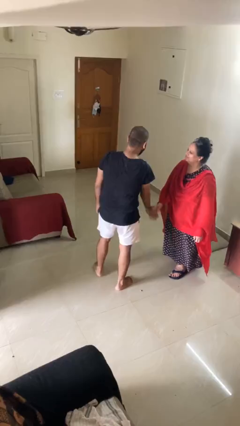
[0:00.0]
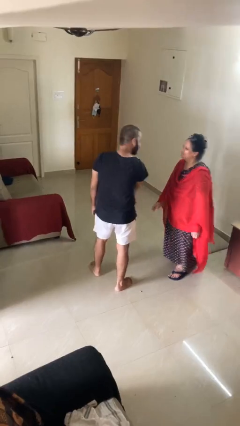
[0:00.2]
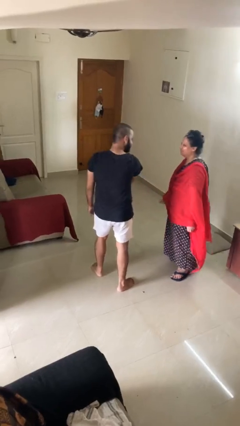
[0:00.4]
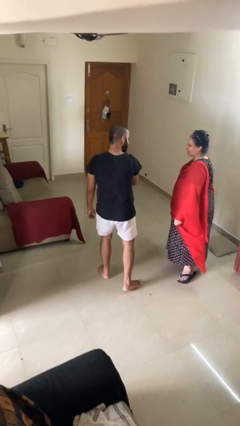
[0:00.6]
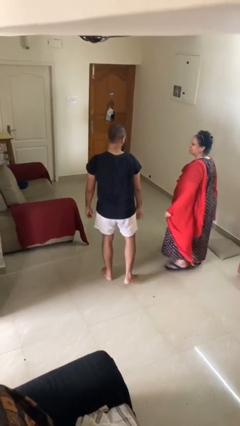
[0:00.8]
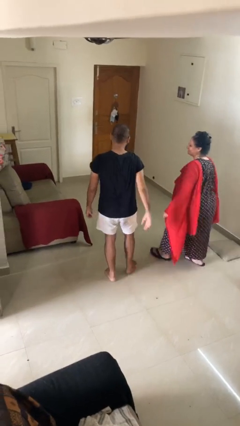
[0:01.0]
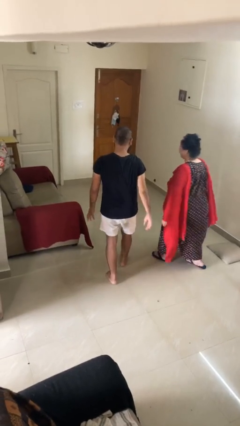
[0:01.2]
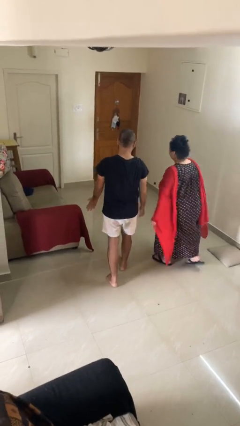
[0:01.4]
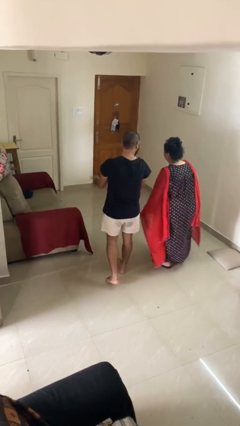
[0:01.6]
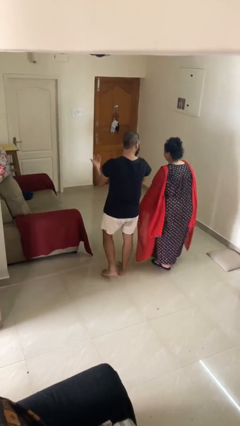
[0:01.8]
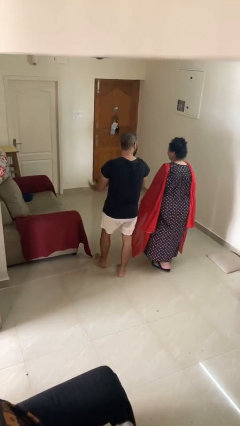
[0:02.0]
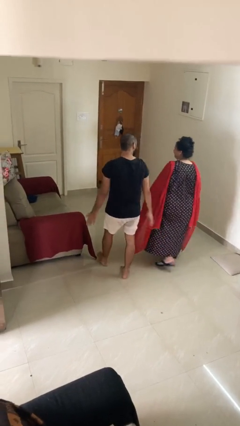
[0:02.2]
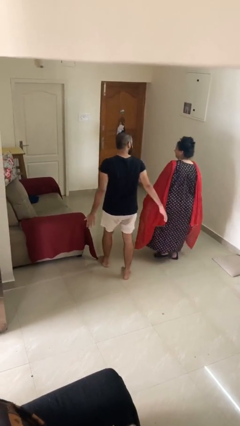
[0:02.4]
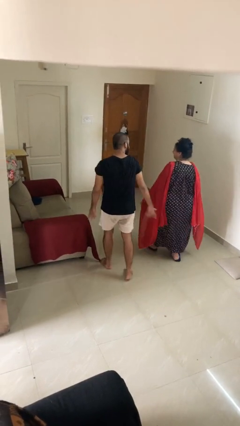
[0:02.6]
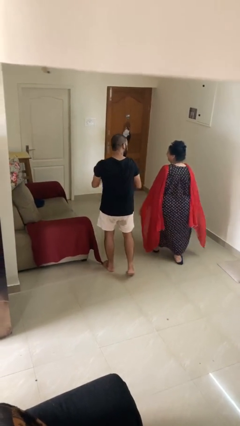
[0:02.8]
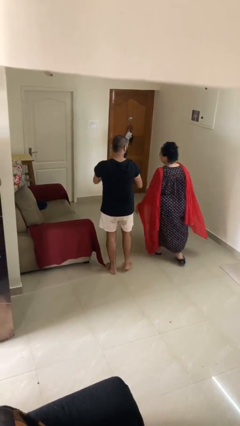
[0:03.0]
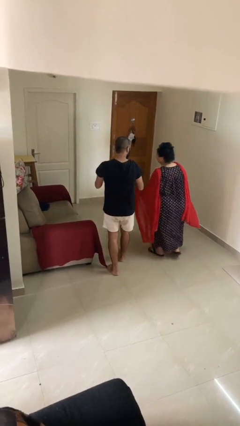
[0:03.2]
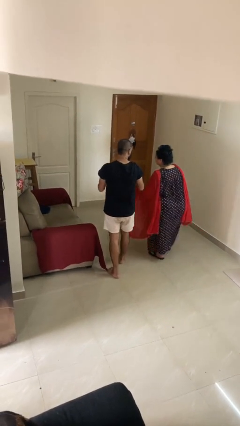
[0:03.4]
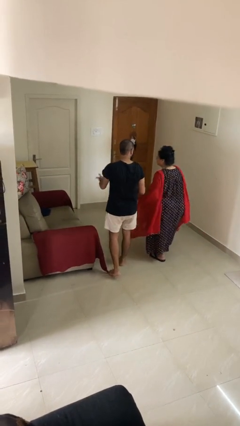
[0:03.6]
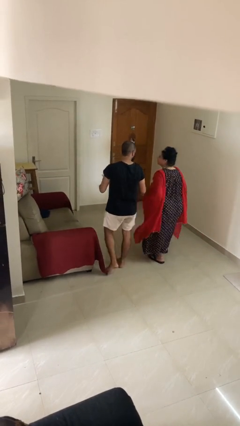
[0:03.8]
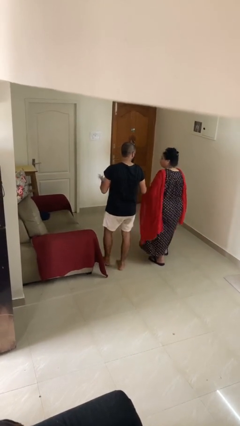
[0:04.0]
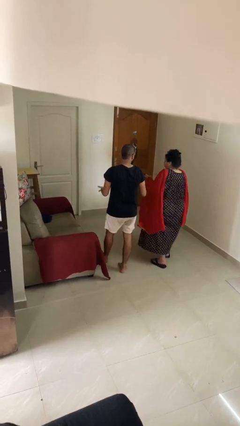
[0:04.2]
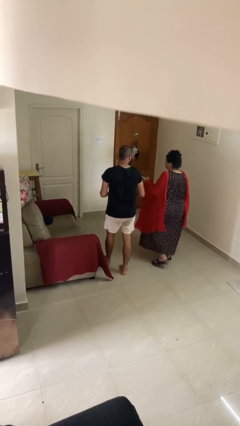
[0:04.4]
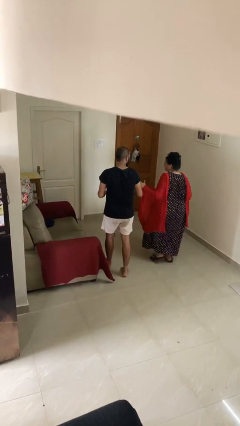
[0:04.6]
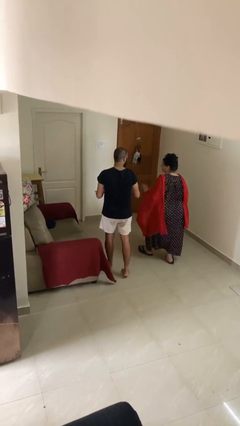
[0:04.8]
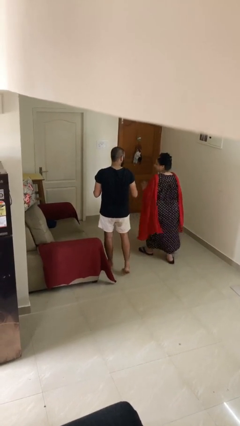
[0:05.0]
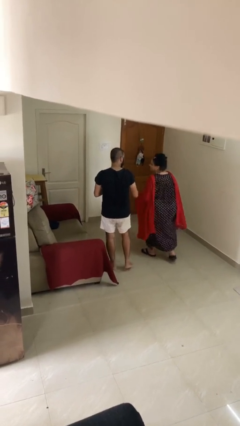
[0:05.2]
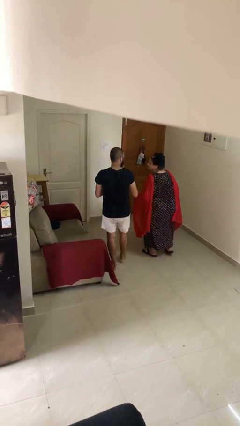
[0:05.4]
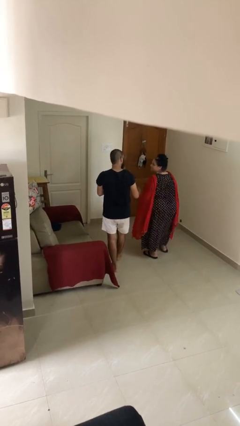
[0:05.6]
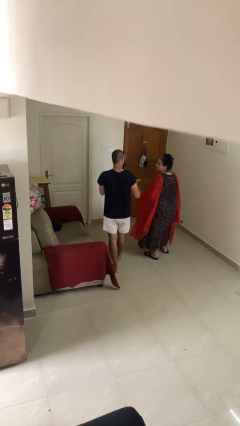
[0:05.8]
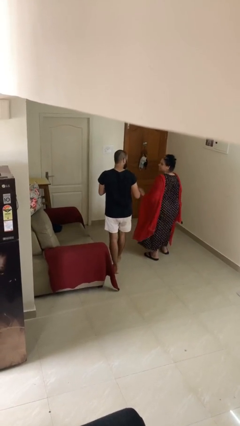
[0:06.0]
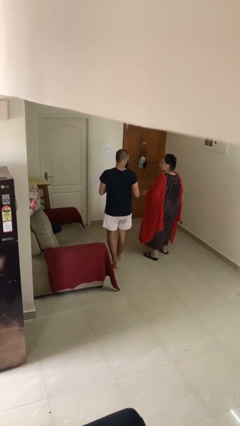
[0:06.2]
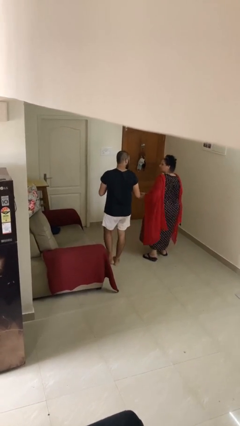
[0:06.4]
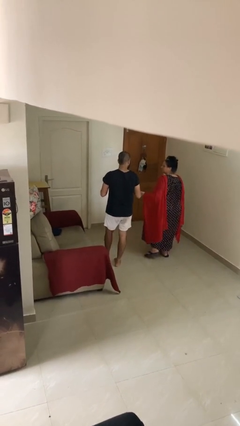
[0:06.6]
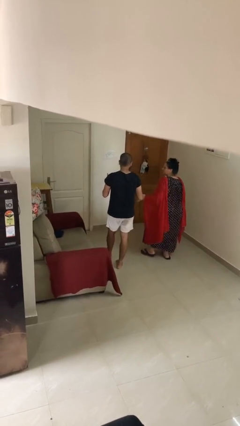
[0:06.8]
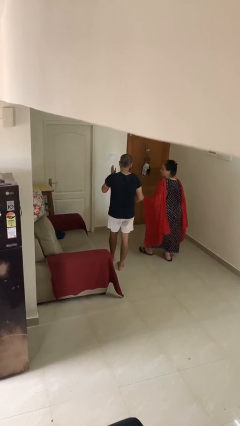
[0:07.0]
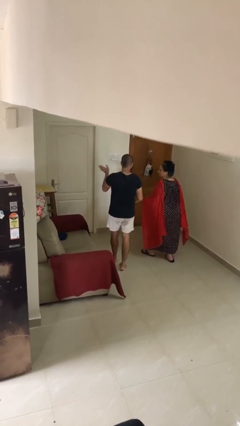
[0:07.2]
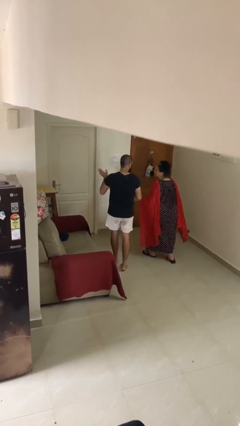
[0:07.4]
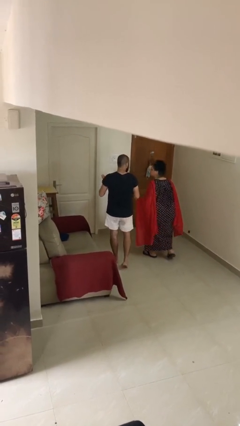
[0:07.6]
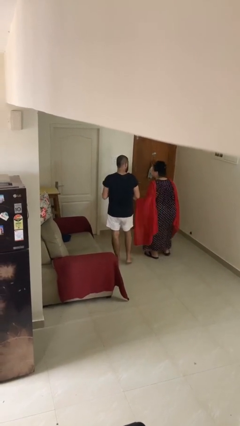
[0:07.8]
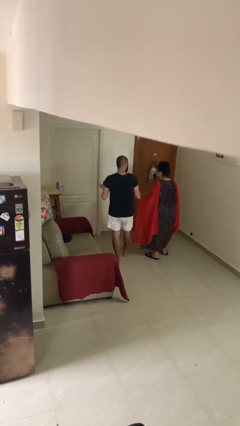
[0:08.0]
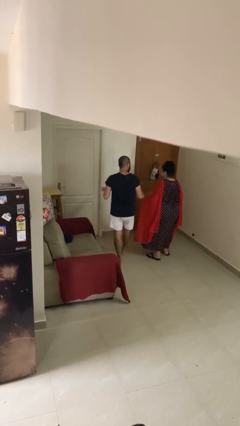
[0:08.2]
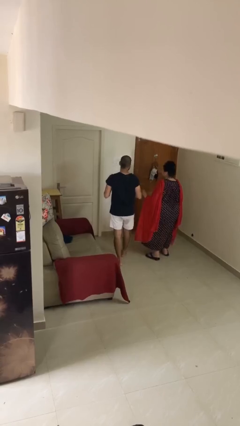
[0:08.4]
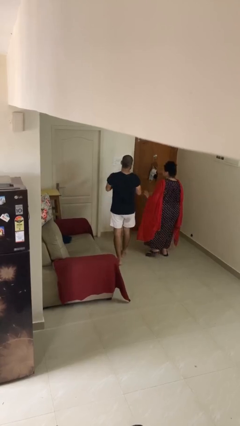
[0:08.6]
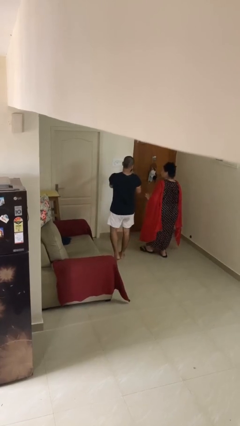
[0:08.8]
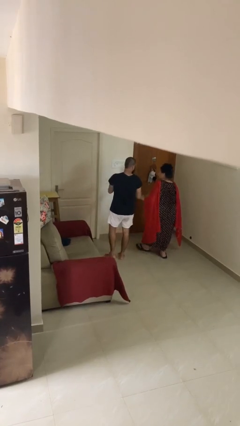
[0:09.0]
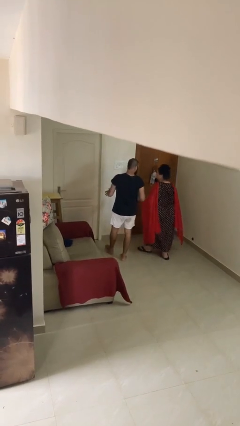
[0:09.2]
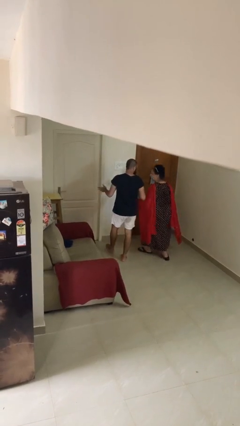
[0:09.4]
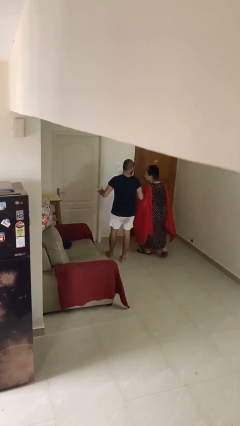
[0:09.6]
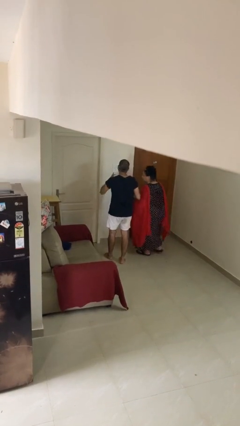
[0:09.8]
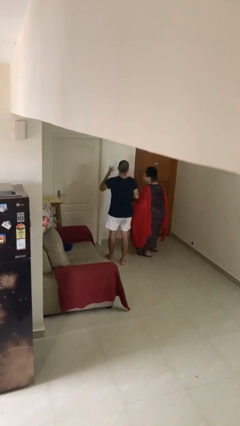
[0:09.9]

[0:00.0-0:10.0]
person talks to person

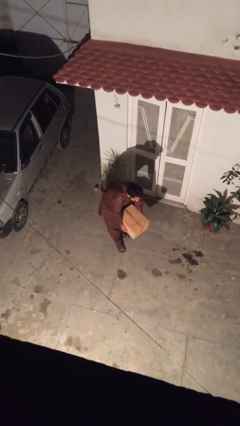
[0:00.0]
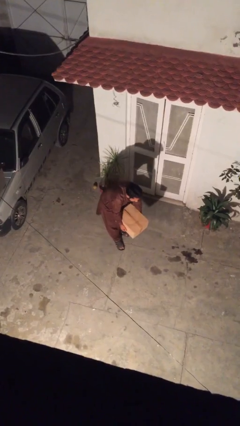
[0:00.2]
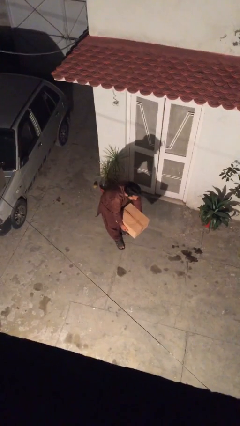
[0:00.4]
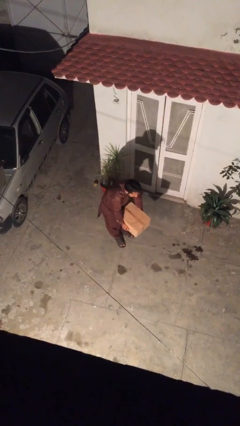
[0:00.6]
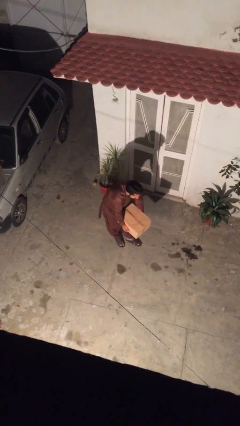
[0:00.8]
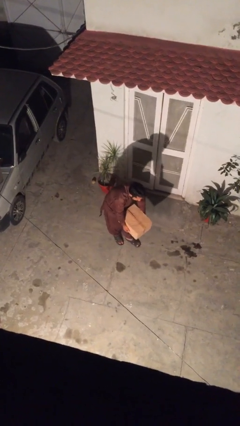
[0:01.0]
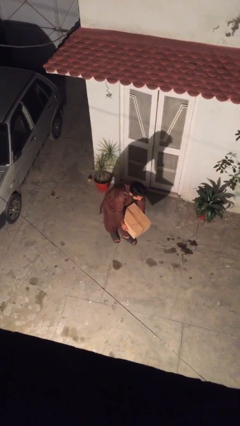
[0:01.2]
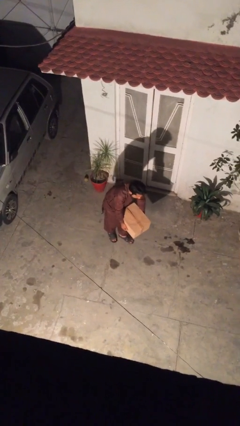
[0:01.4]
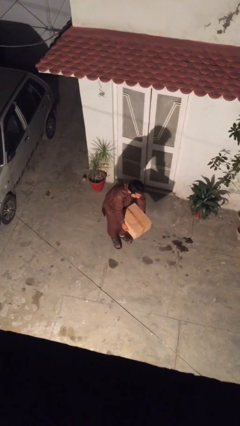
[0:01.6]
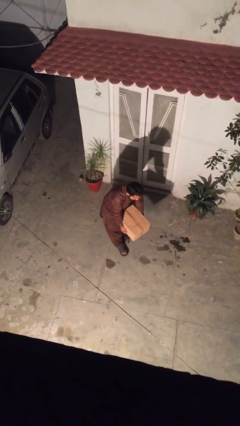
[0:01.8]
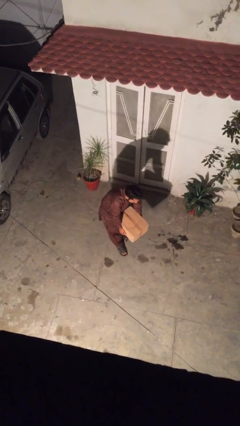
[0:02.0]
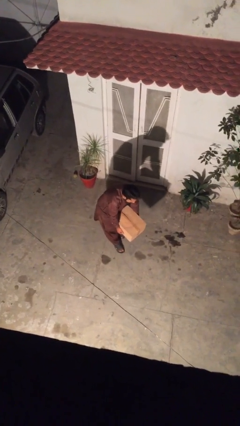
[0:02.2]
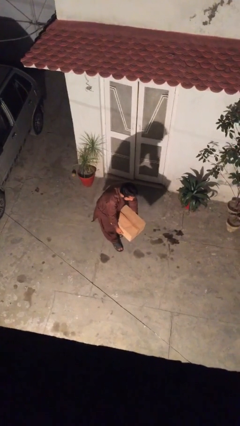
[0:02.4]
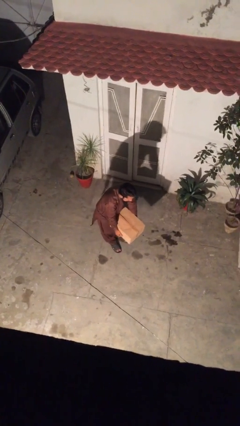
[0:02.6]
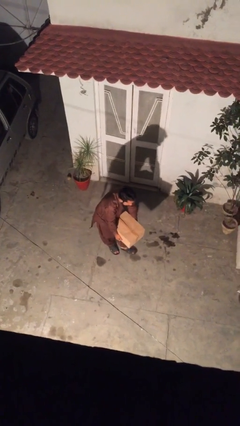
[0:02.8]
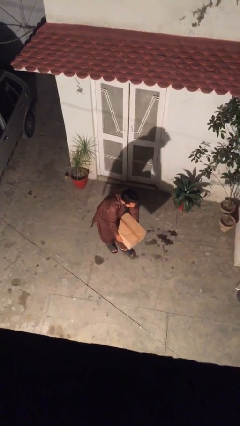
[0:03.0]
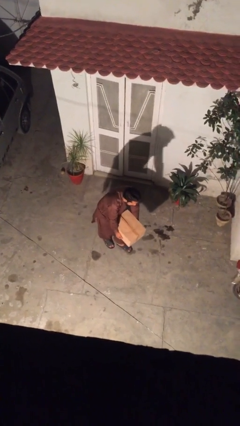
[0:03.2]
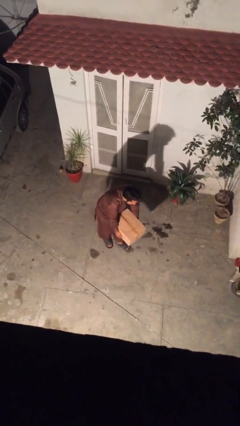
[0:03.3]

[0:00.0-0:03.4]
person carries heavy object

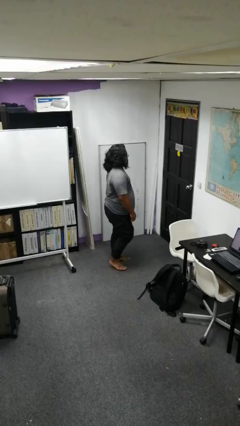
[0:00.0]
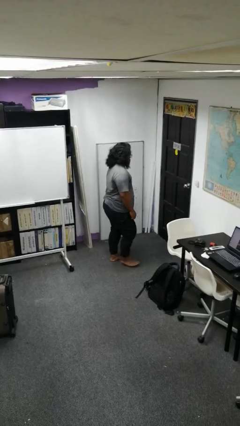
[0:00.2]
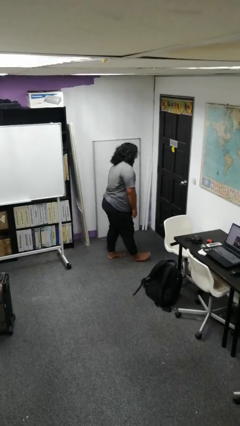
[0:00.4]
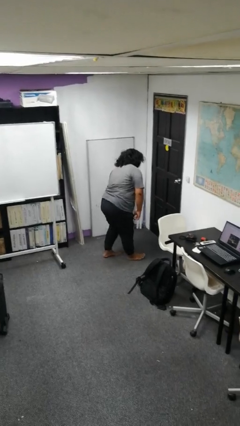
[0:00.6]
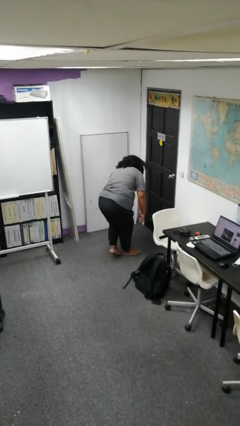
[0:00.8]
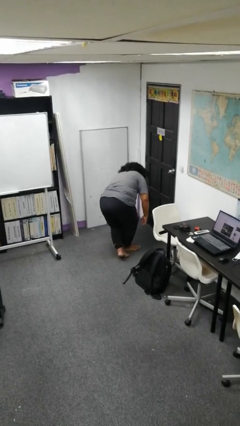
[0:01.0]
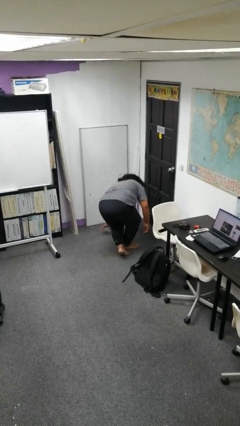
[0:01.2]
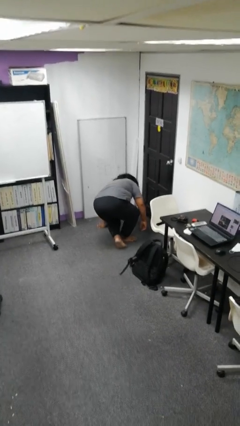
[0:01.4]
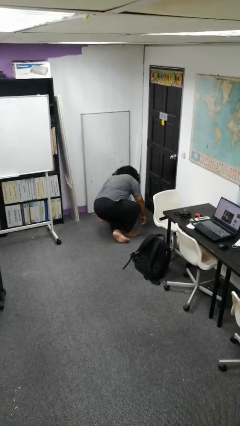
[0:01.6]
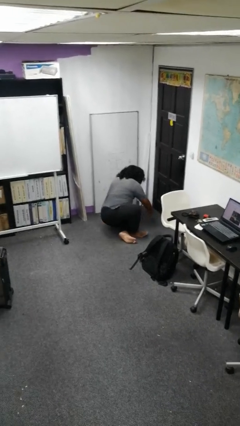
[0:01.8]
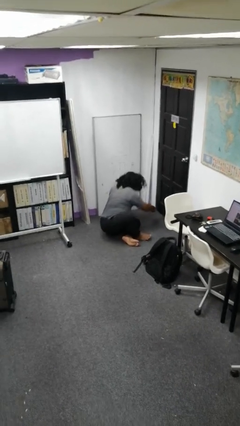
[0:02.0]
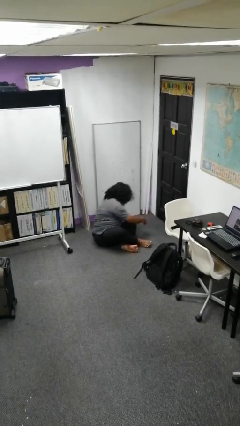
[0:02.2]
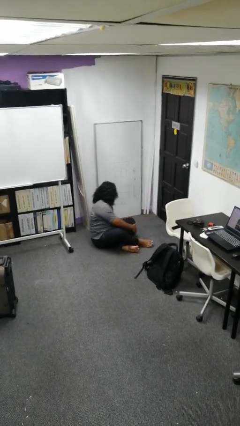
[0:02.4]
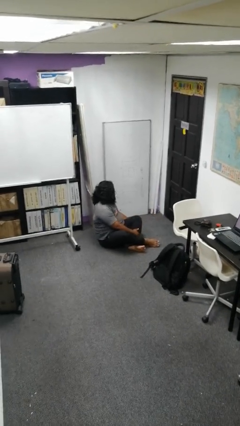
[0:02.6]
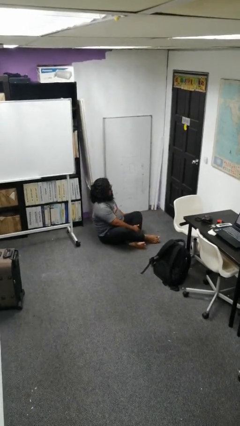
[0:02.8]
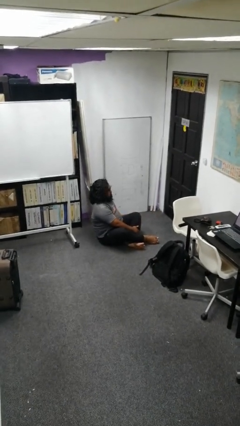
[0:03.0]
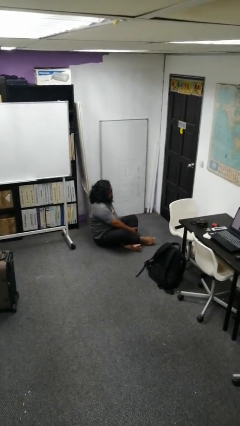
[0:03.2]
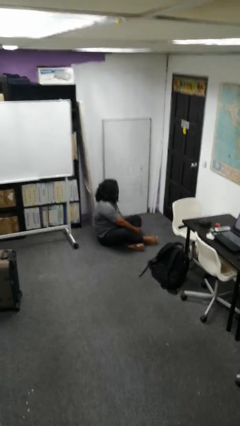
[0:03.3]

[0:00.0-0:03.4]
person sits crisscross

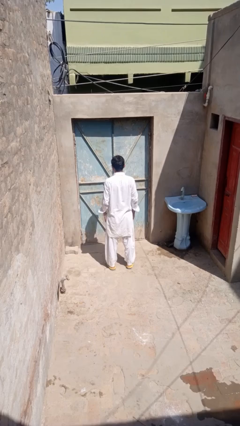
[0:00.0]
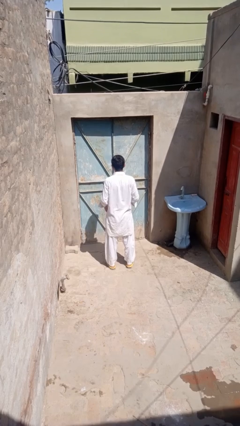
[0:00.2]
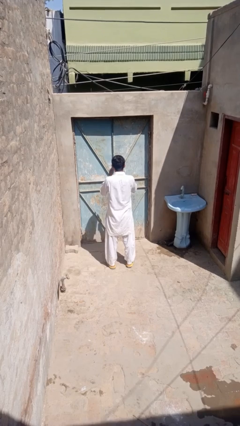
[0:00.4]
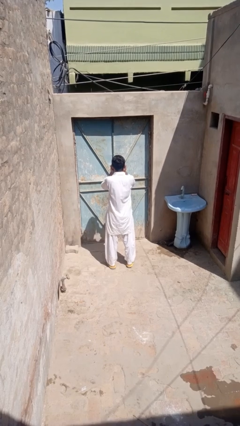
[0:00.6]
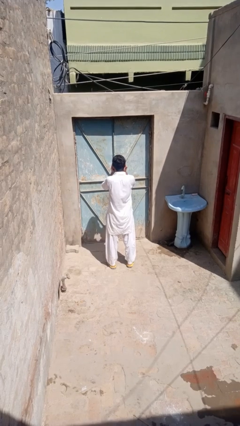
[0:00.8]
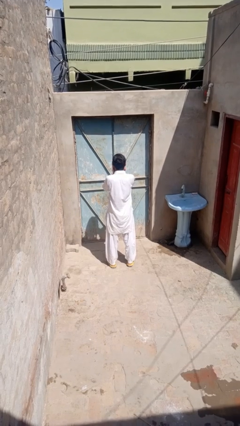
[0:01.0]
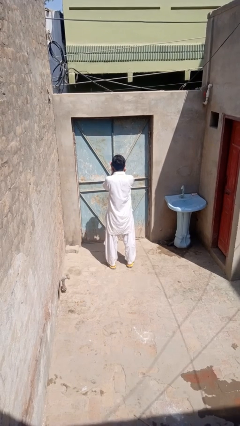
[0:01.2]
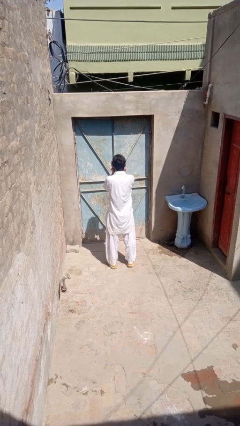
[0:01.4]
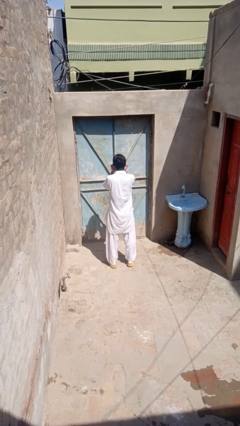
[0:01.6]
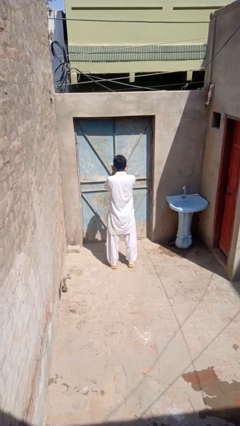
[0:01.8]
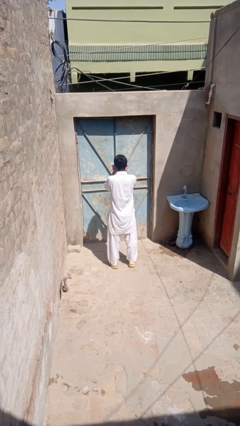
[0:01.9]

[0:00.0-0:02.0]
person rubs eyes
